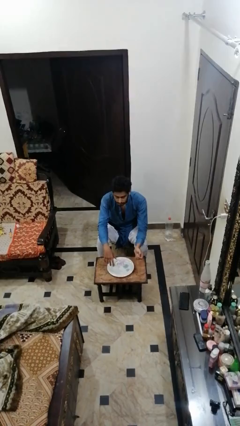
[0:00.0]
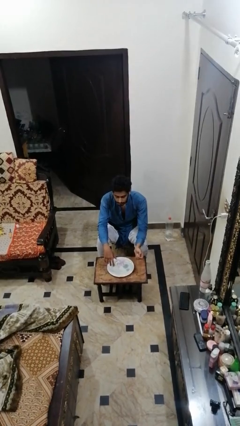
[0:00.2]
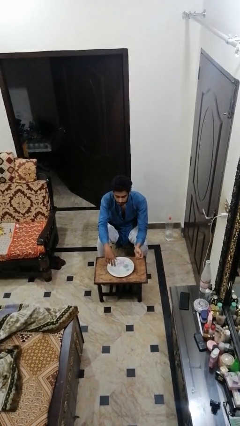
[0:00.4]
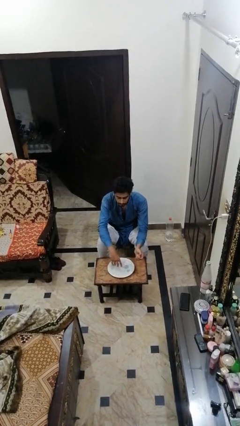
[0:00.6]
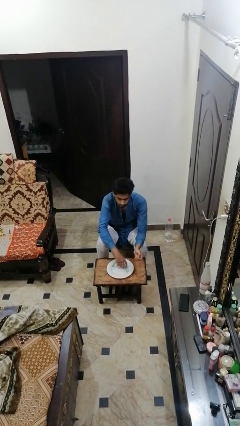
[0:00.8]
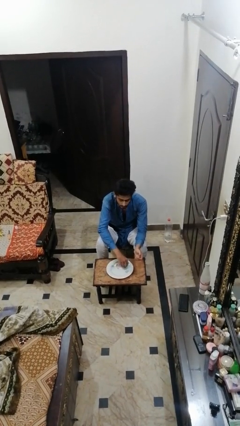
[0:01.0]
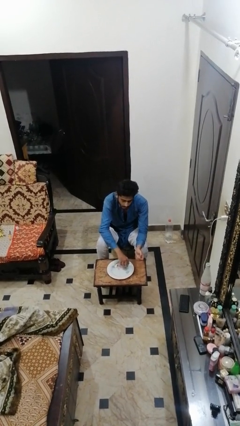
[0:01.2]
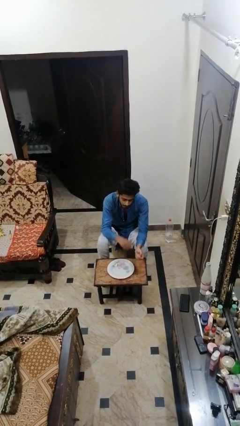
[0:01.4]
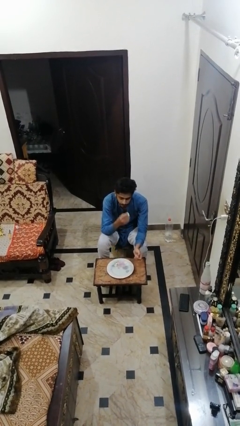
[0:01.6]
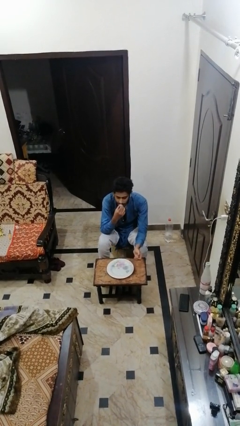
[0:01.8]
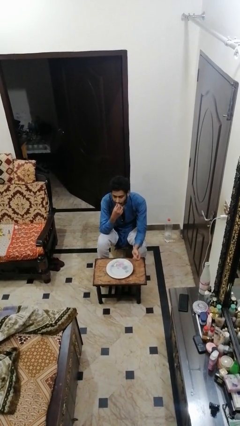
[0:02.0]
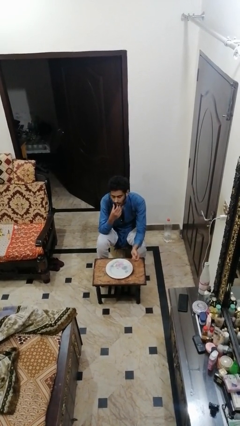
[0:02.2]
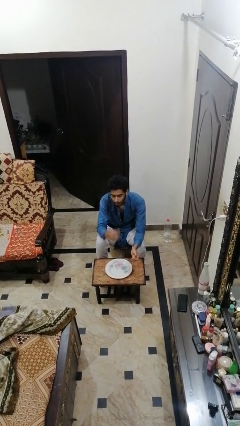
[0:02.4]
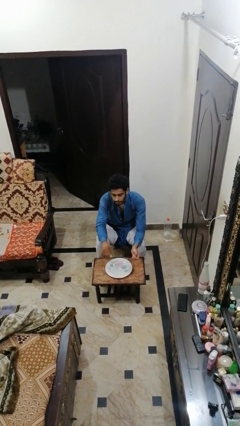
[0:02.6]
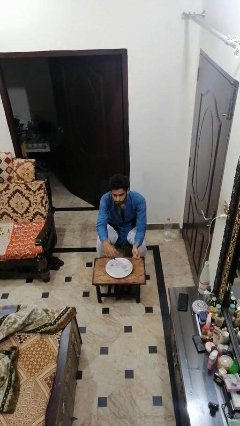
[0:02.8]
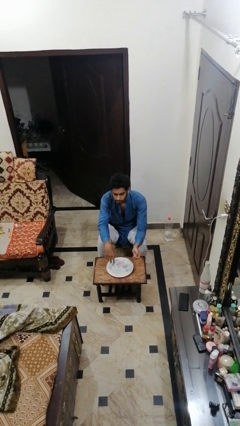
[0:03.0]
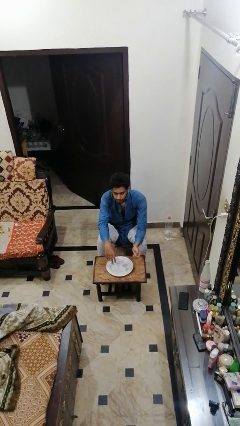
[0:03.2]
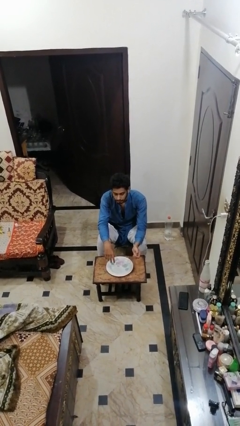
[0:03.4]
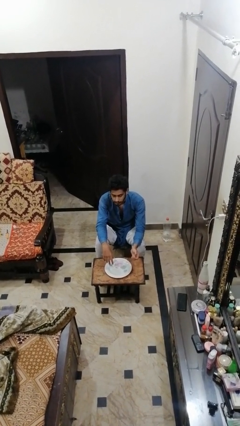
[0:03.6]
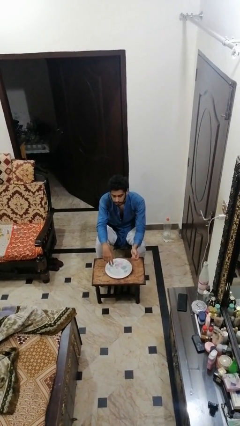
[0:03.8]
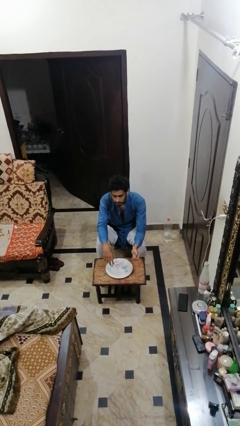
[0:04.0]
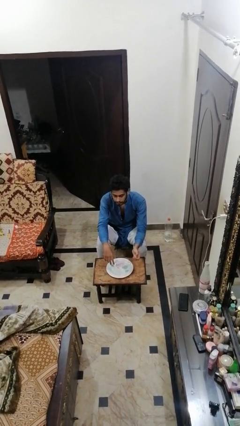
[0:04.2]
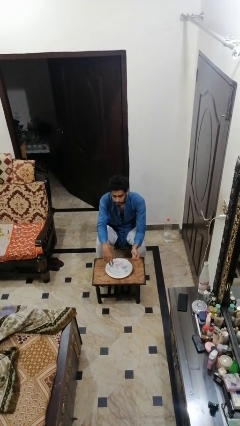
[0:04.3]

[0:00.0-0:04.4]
person eats with hands

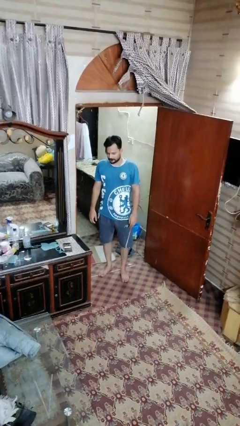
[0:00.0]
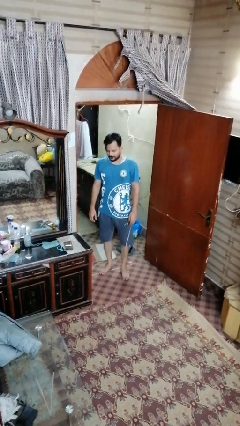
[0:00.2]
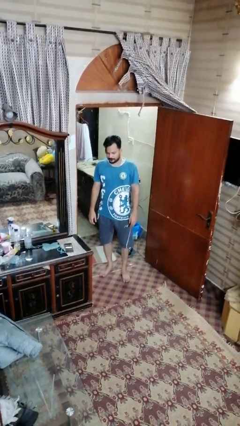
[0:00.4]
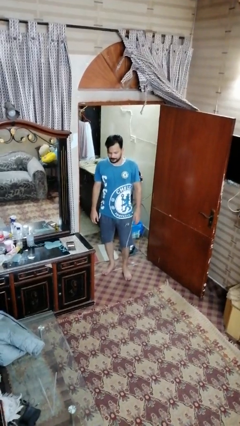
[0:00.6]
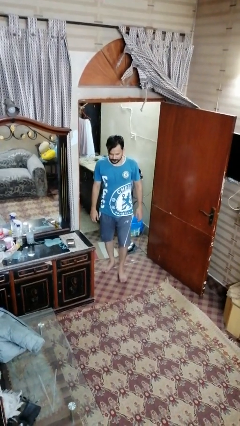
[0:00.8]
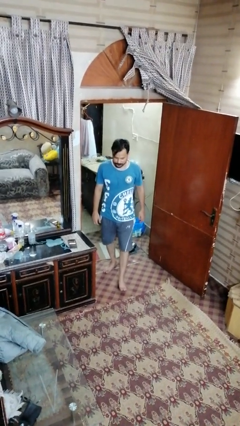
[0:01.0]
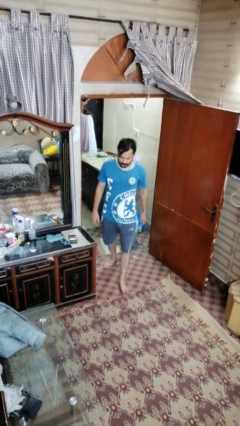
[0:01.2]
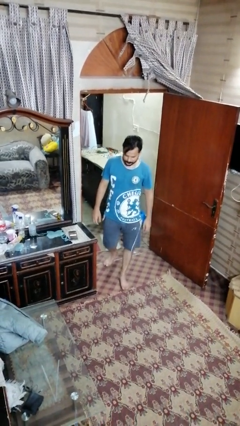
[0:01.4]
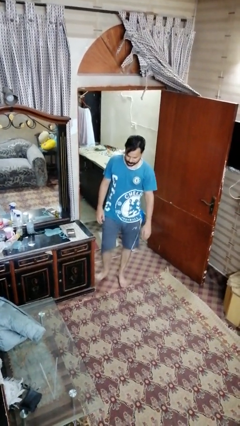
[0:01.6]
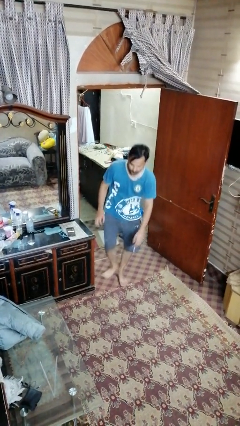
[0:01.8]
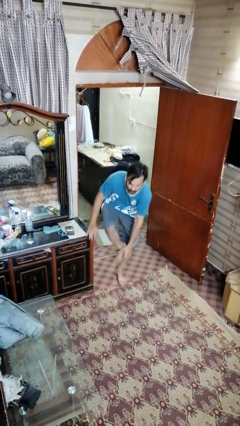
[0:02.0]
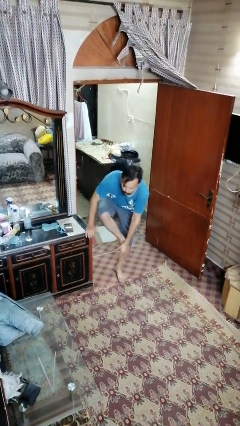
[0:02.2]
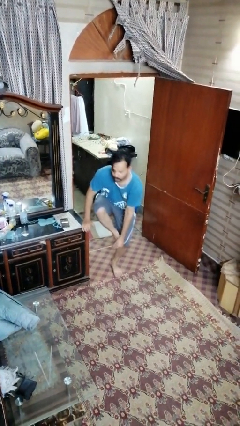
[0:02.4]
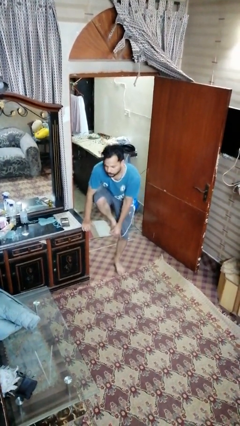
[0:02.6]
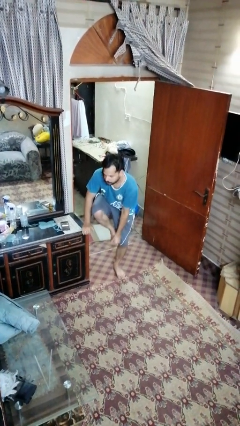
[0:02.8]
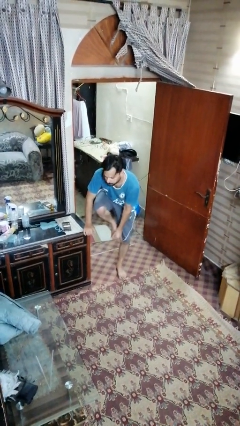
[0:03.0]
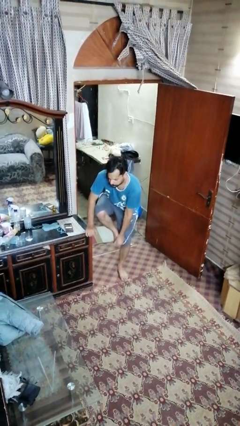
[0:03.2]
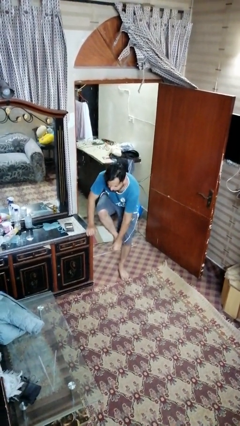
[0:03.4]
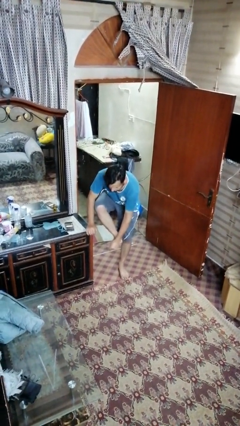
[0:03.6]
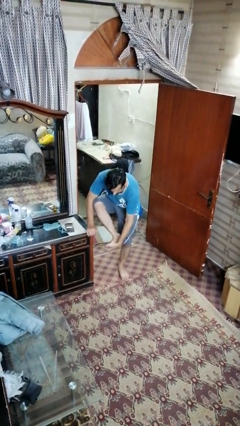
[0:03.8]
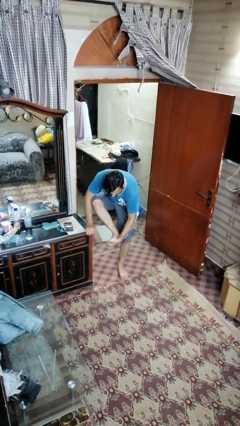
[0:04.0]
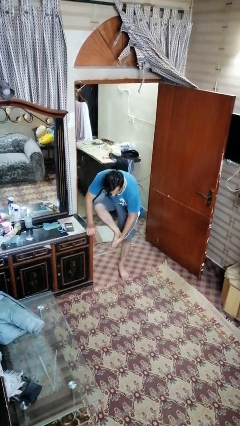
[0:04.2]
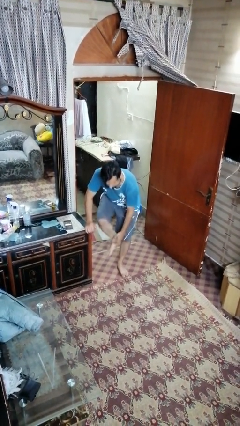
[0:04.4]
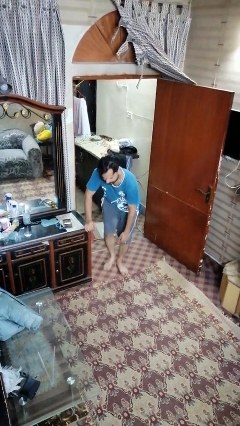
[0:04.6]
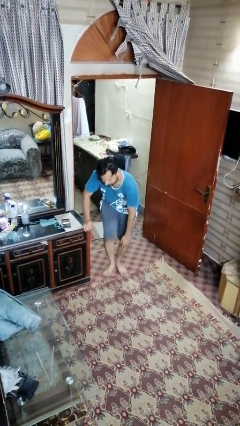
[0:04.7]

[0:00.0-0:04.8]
person trips on object on floor

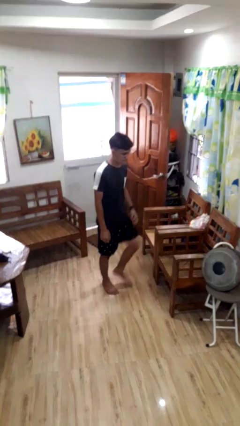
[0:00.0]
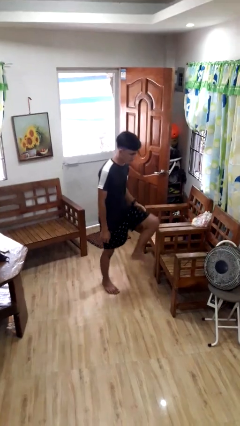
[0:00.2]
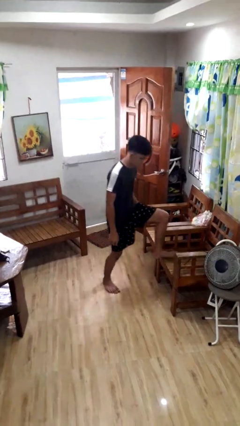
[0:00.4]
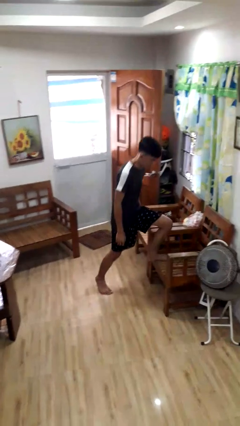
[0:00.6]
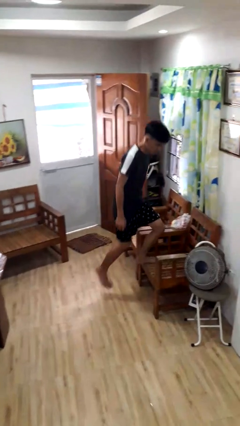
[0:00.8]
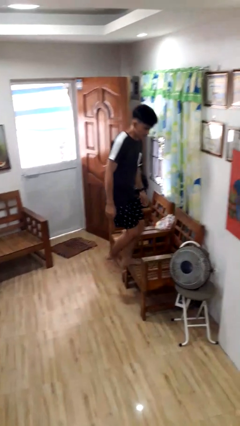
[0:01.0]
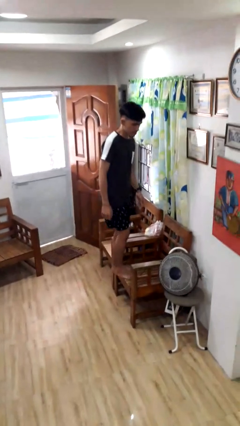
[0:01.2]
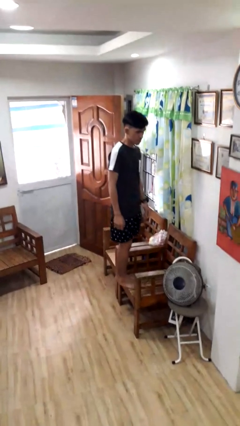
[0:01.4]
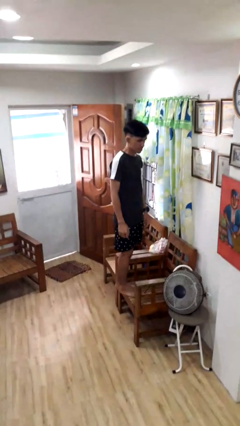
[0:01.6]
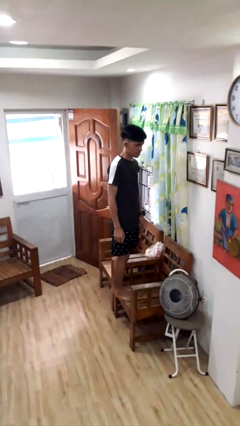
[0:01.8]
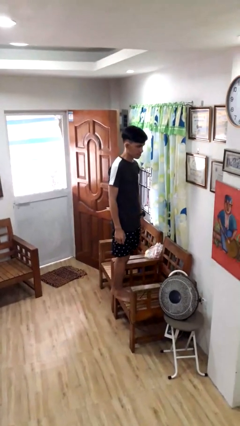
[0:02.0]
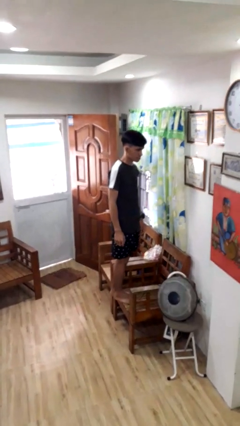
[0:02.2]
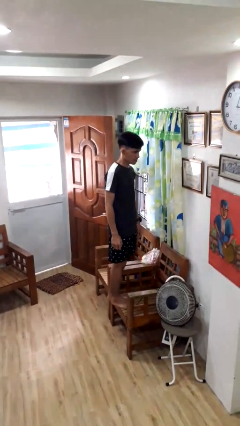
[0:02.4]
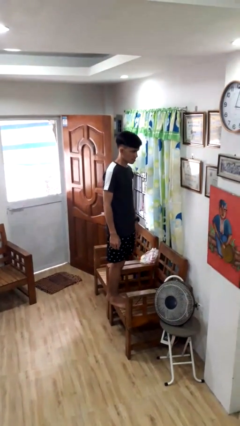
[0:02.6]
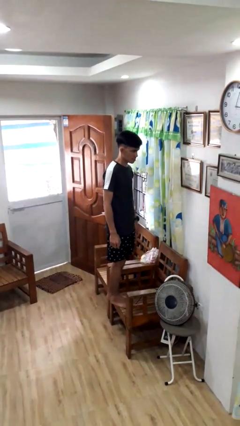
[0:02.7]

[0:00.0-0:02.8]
person climbs on chair

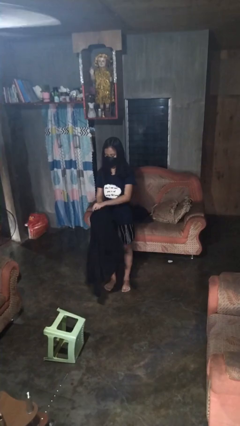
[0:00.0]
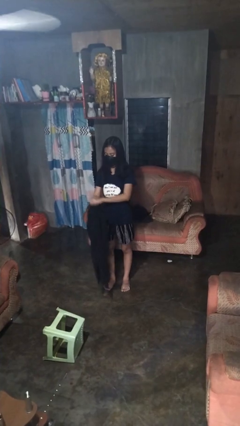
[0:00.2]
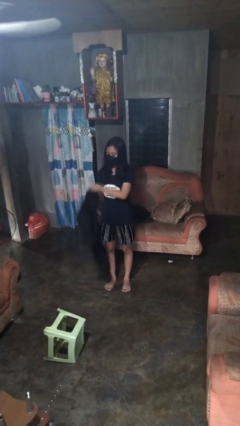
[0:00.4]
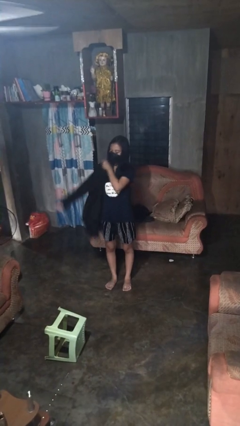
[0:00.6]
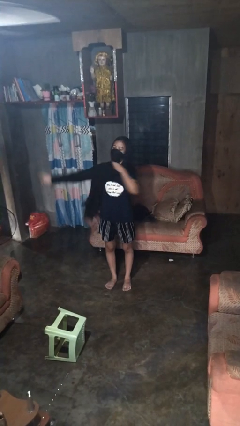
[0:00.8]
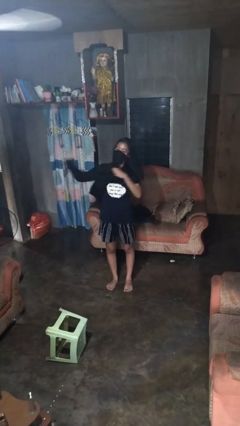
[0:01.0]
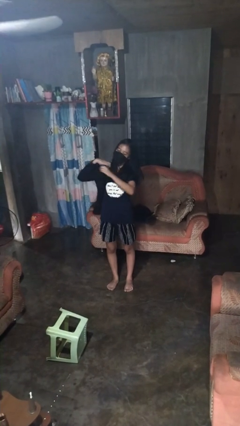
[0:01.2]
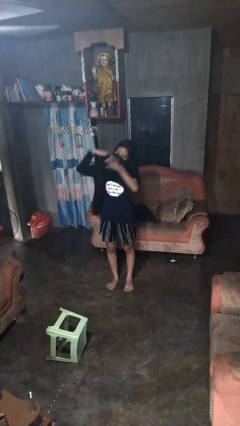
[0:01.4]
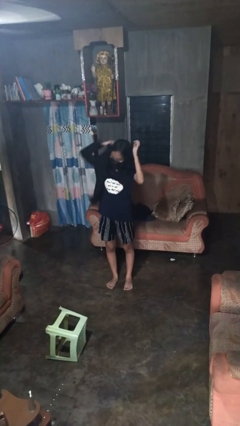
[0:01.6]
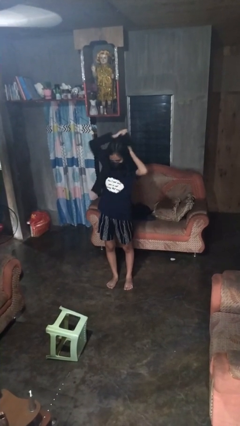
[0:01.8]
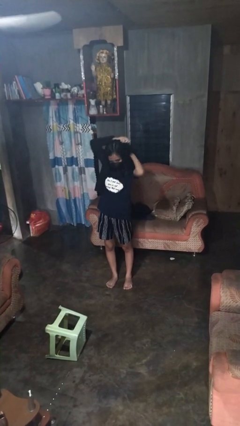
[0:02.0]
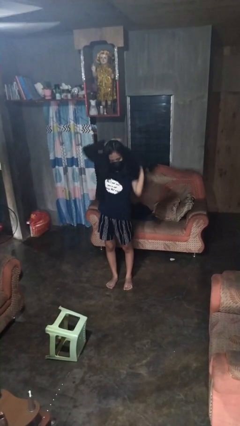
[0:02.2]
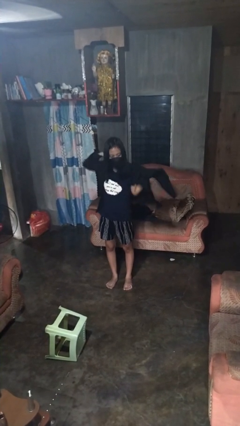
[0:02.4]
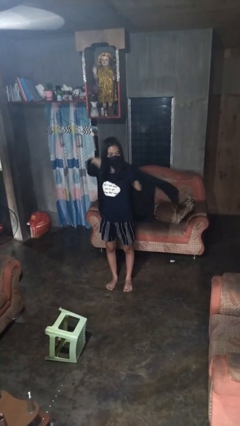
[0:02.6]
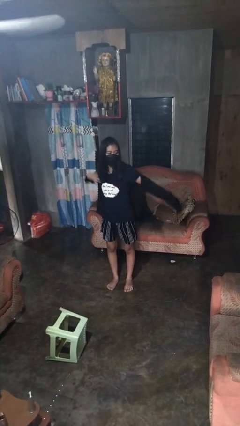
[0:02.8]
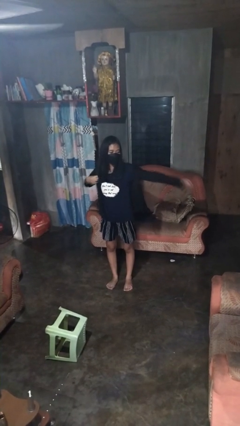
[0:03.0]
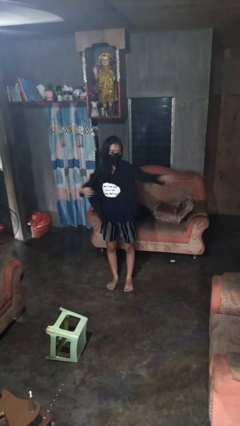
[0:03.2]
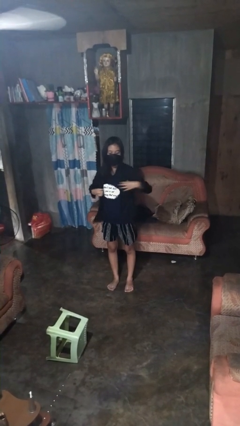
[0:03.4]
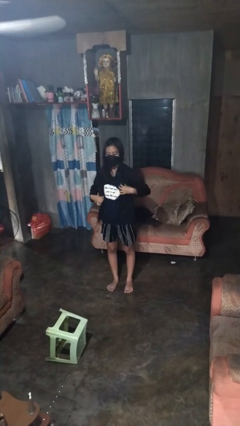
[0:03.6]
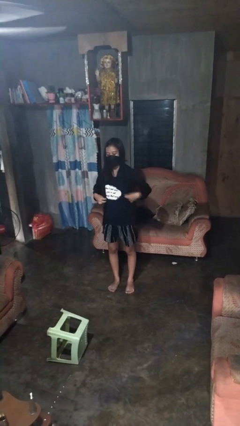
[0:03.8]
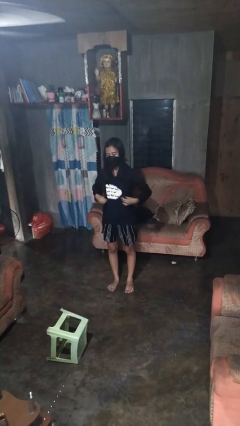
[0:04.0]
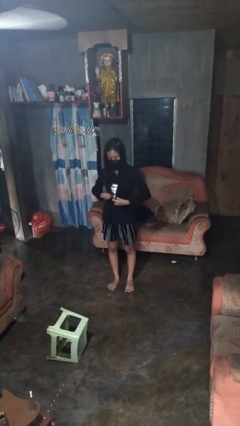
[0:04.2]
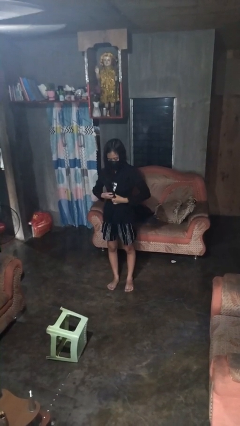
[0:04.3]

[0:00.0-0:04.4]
person puts on shirt

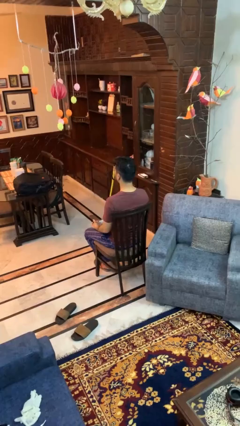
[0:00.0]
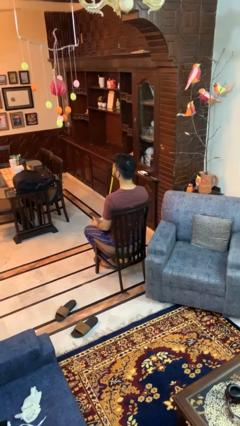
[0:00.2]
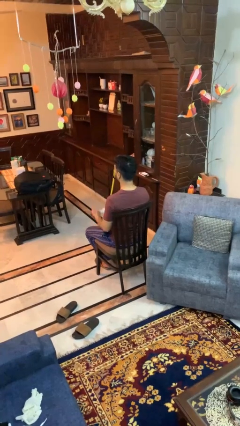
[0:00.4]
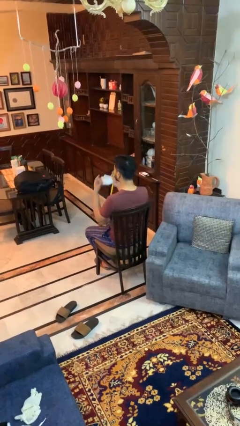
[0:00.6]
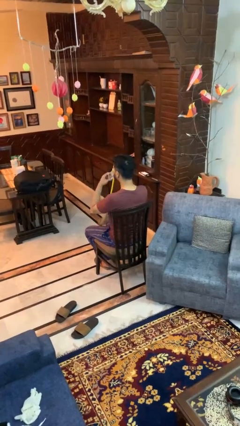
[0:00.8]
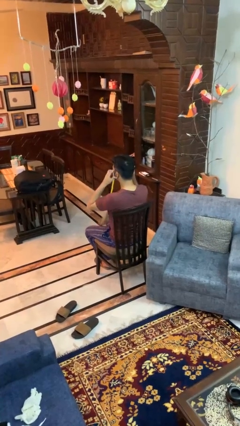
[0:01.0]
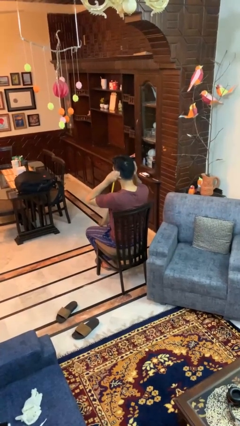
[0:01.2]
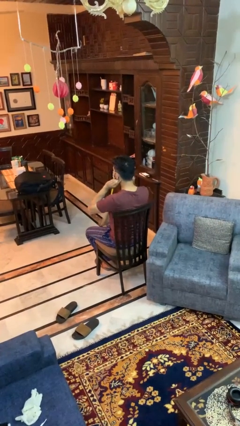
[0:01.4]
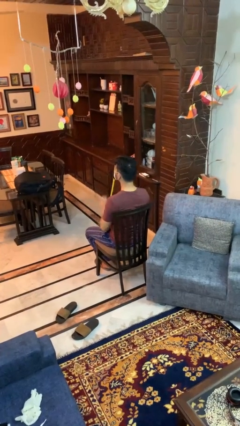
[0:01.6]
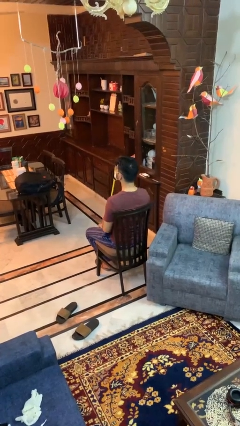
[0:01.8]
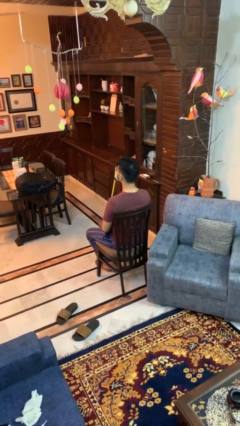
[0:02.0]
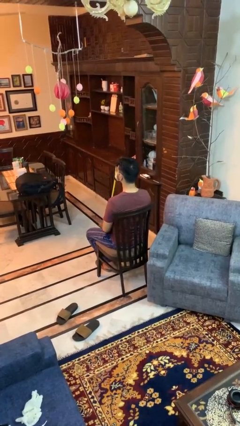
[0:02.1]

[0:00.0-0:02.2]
person puts on facemask
